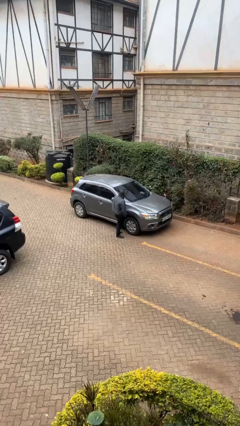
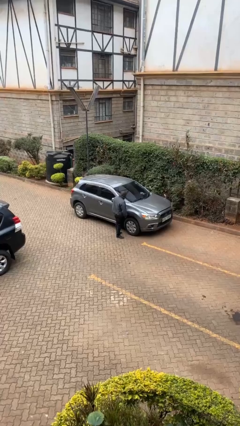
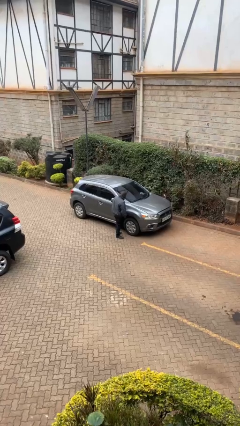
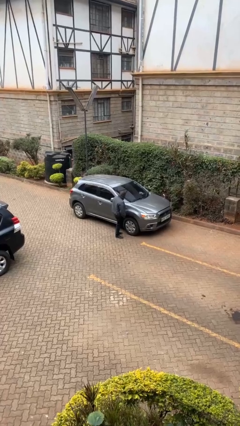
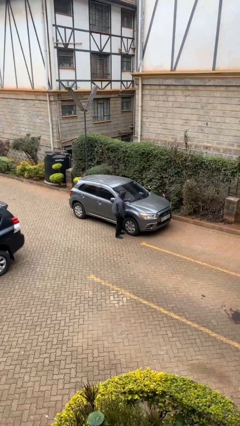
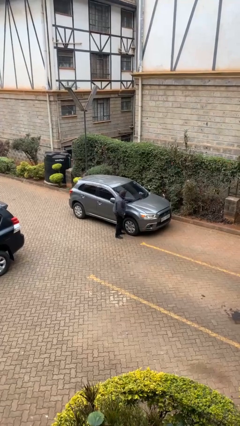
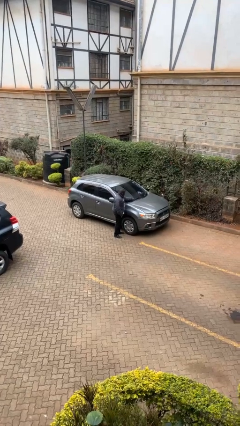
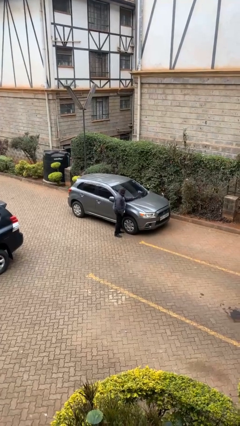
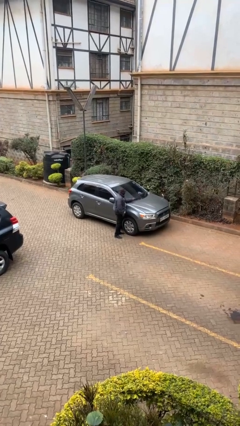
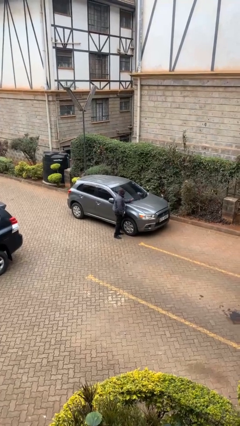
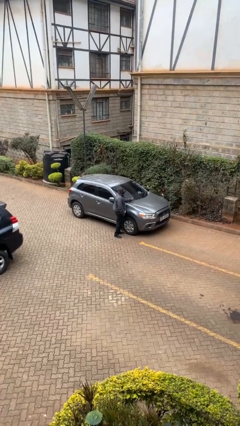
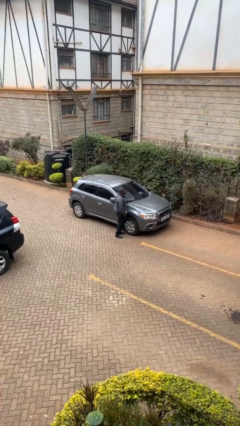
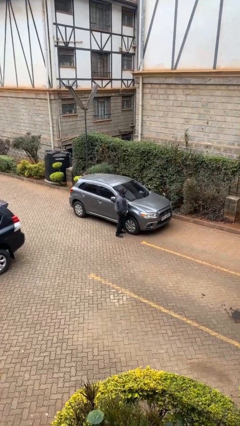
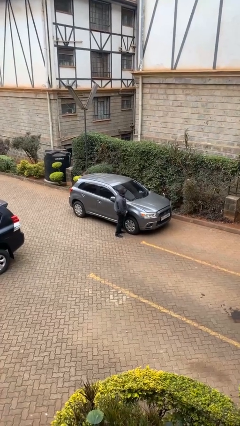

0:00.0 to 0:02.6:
person flips up car wipers

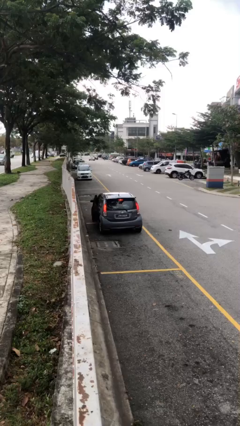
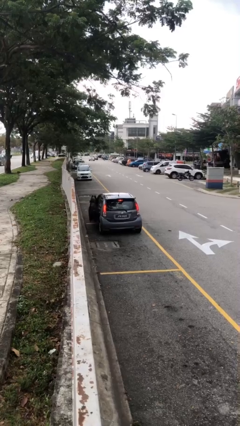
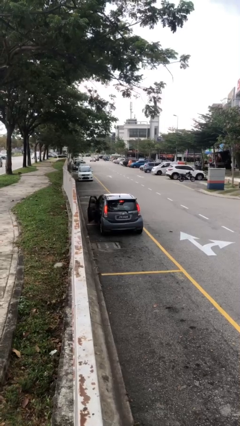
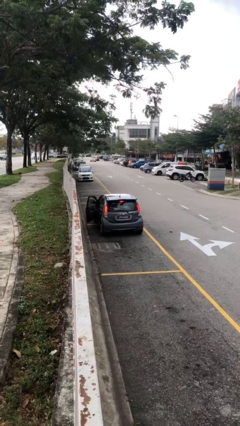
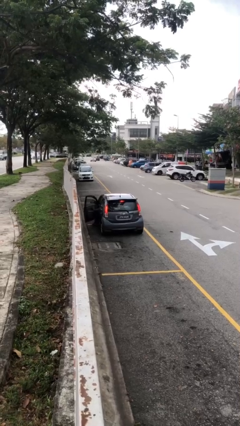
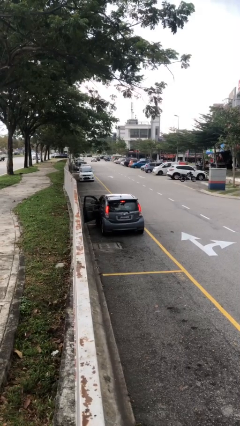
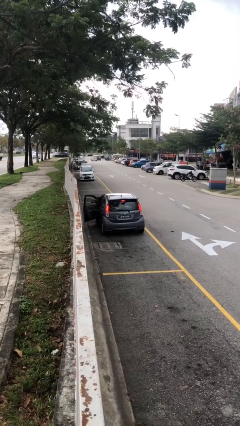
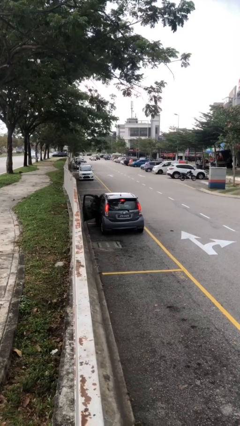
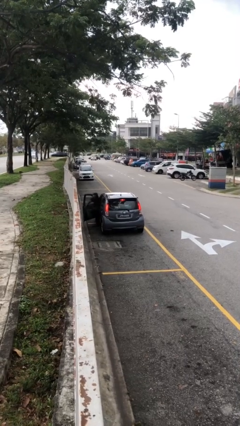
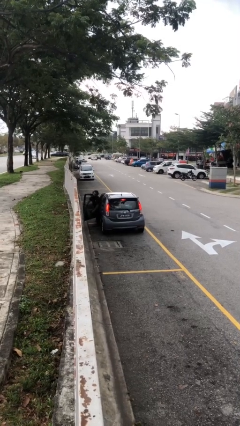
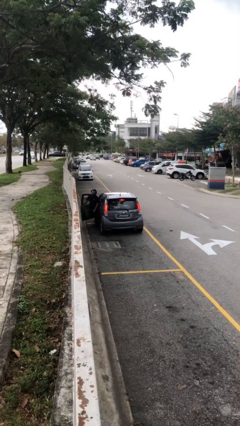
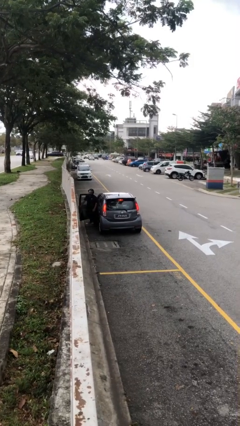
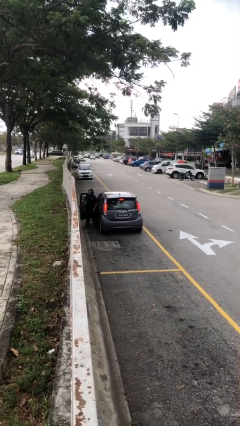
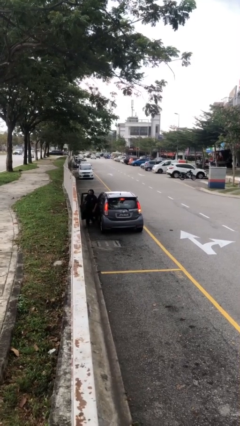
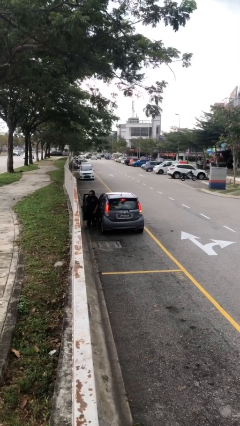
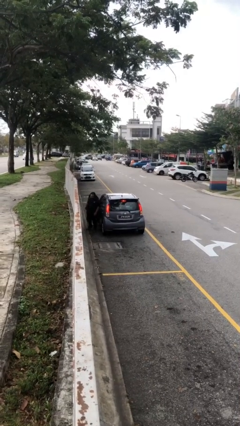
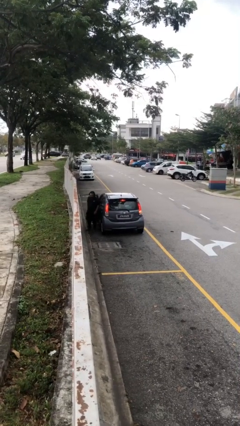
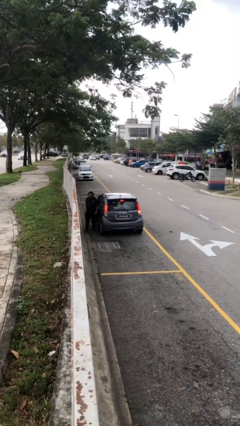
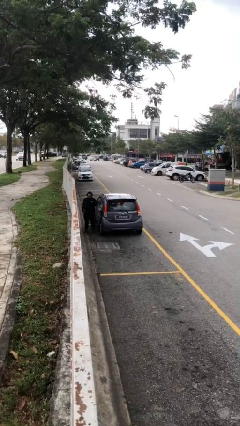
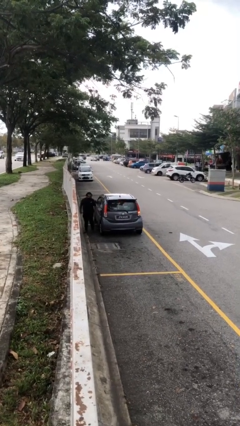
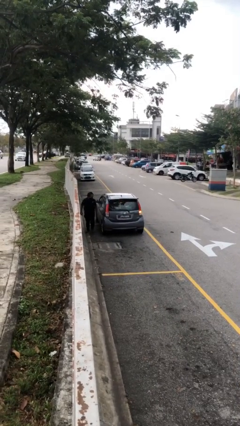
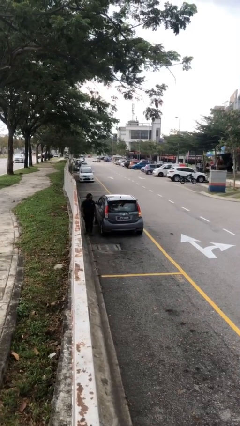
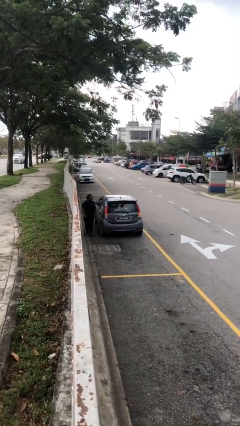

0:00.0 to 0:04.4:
car drops off person

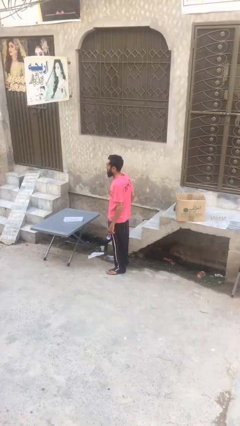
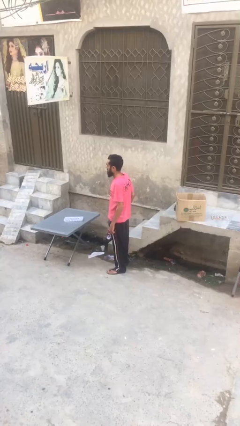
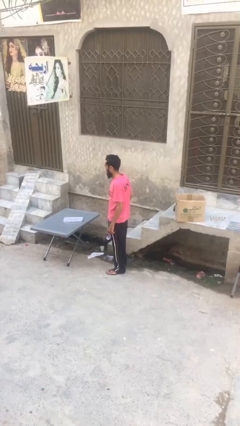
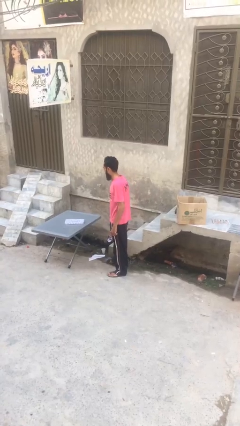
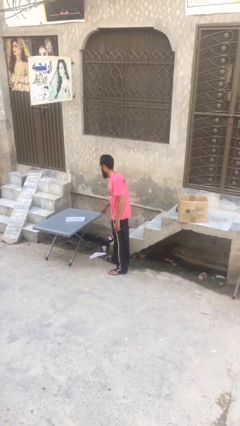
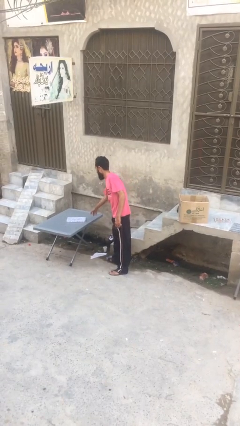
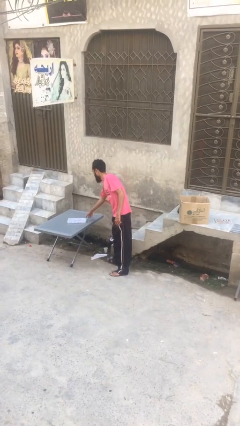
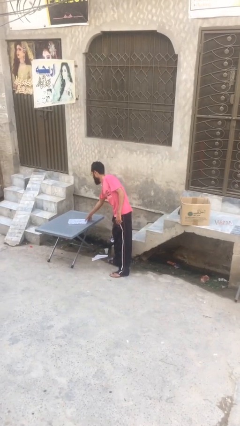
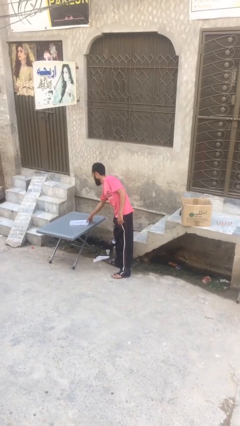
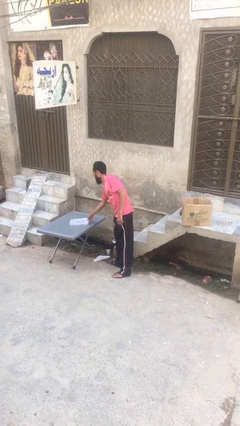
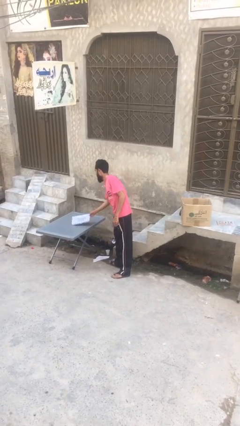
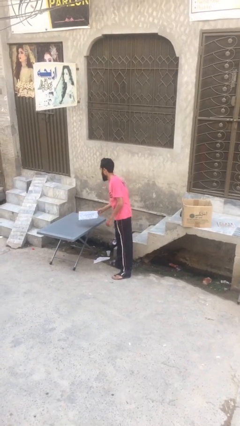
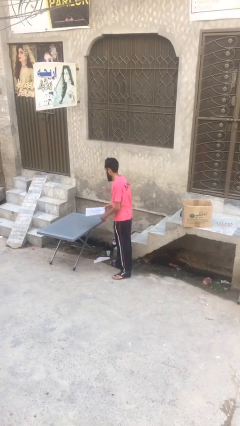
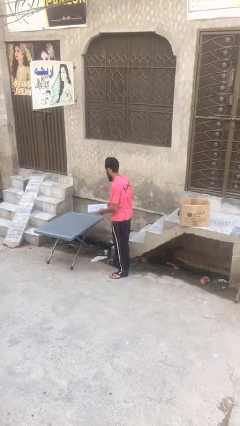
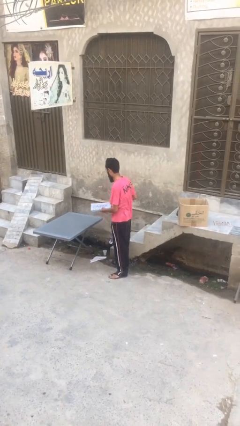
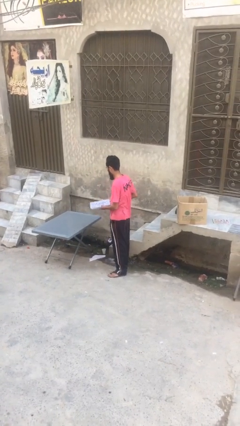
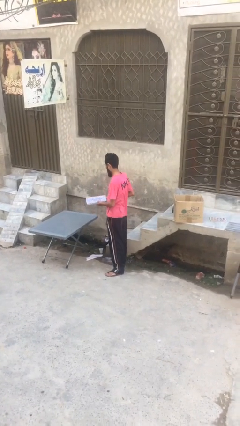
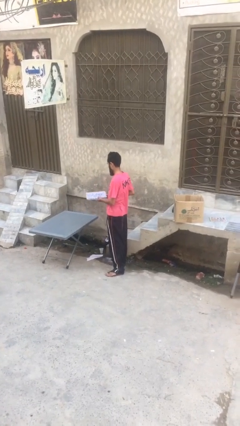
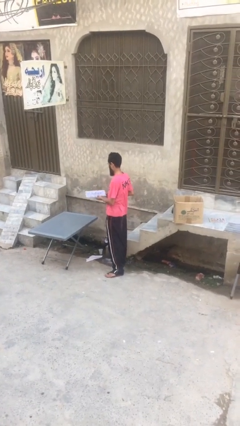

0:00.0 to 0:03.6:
person picks up object from table

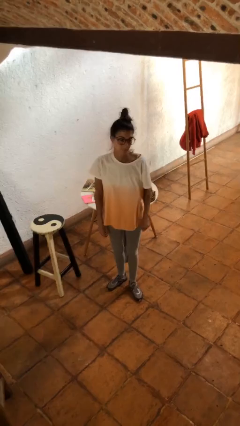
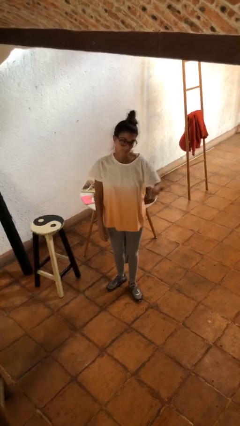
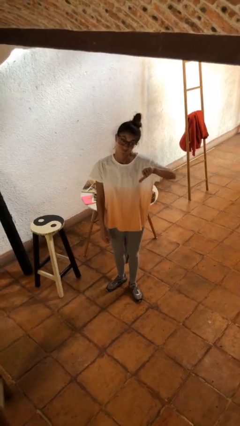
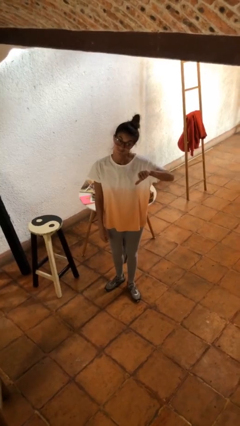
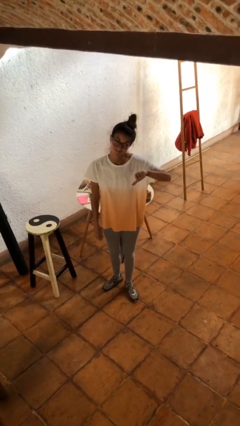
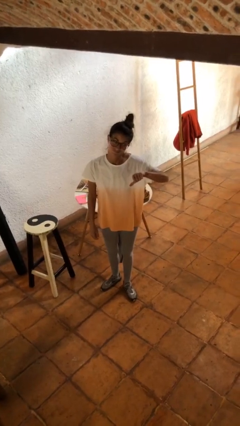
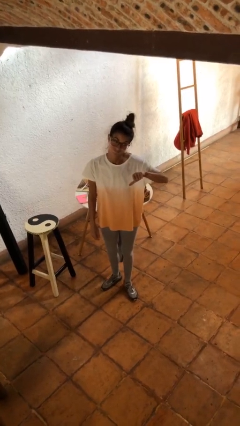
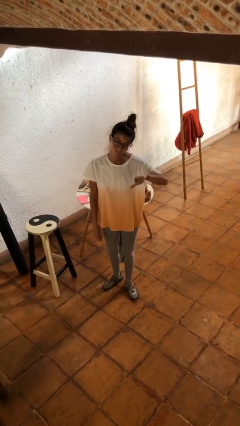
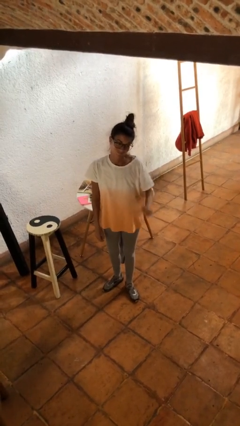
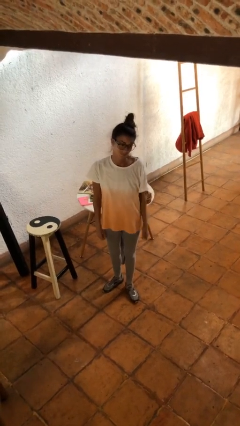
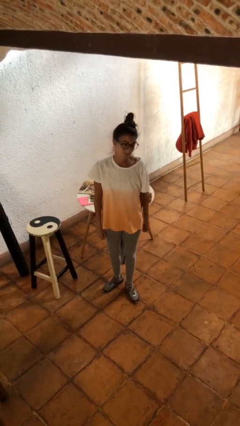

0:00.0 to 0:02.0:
person gestures thumbs down

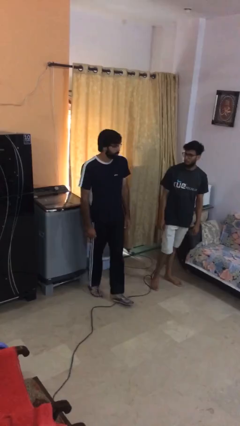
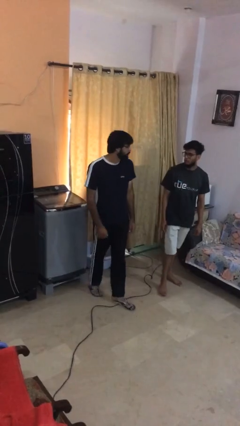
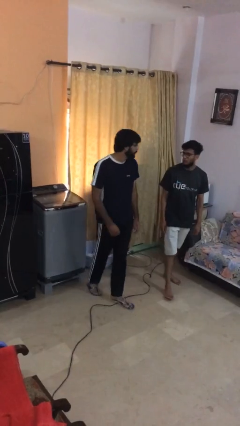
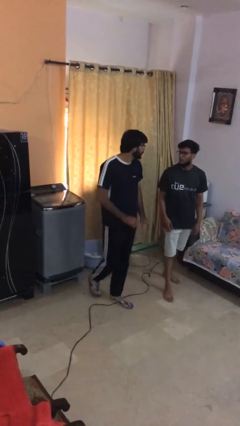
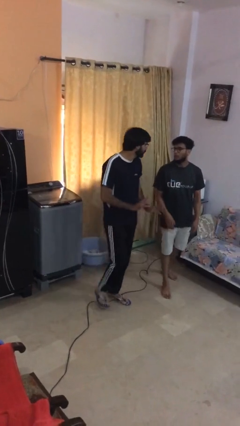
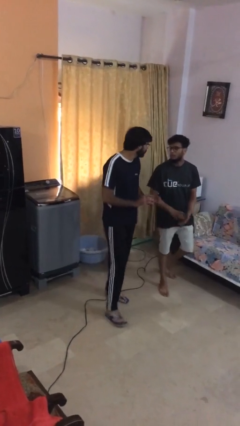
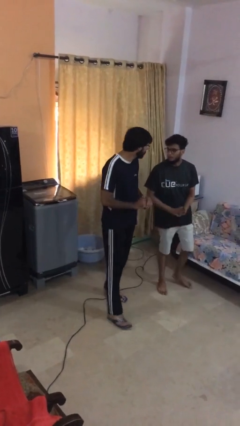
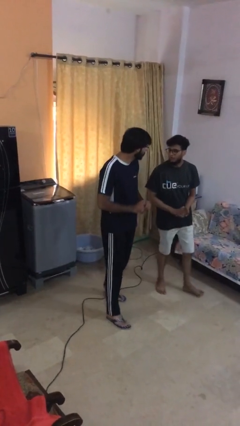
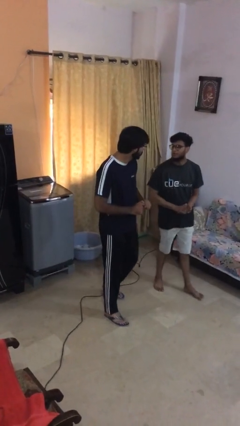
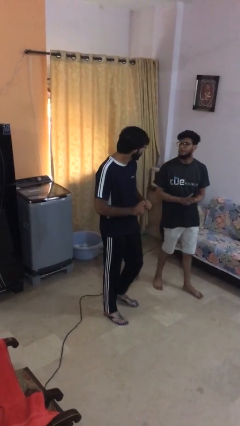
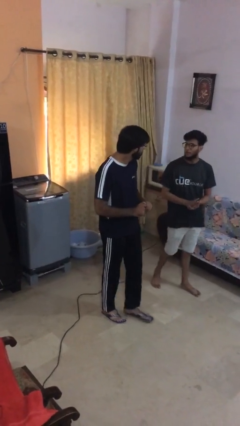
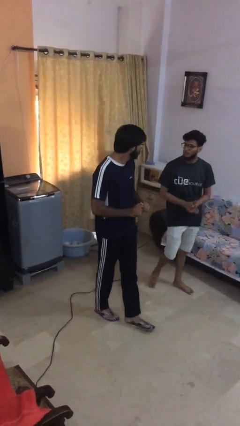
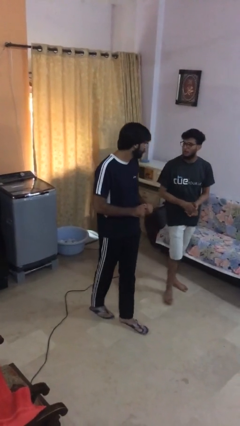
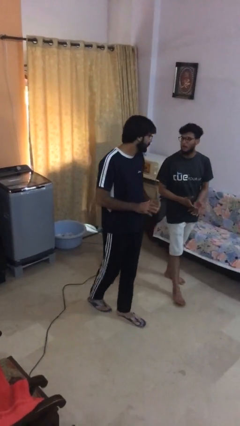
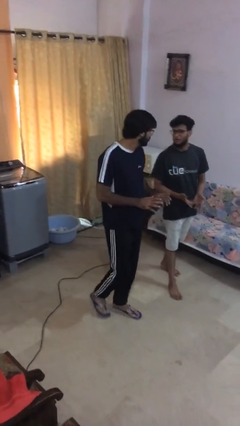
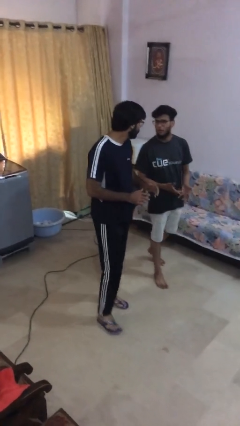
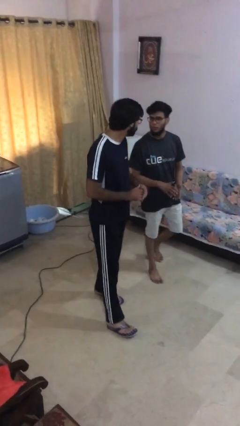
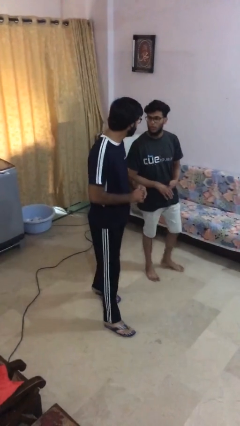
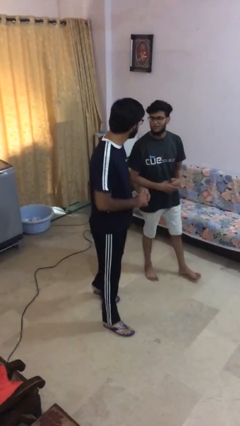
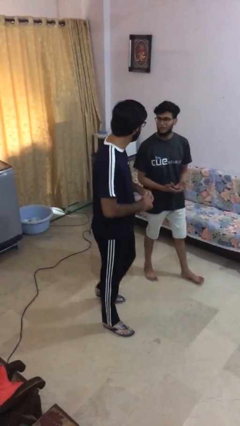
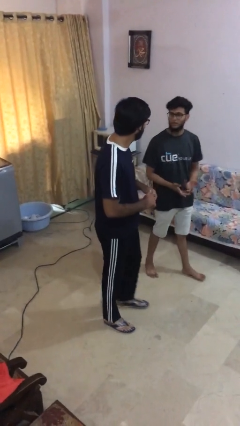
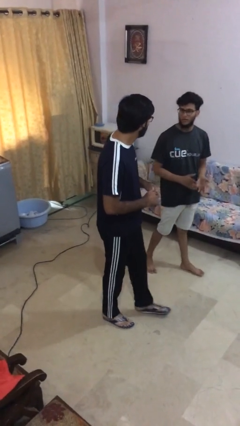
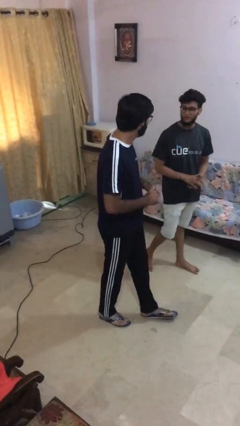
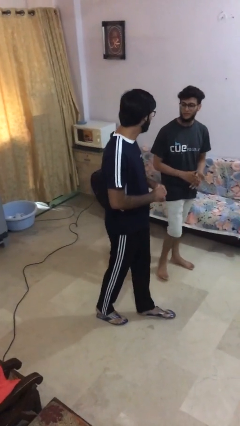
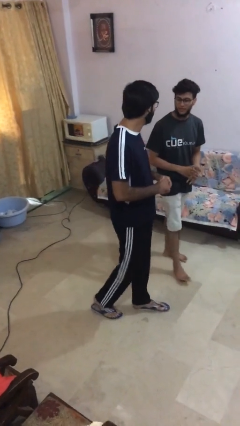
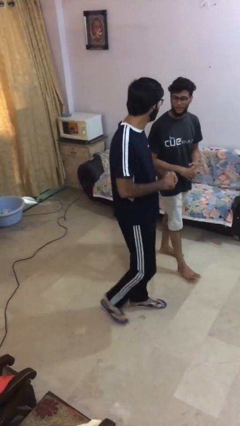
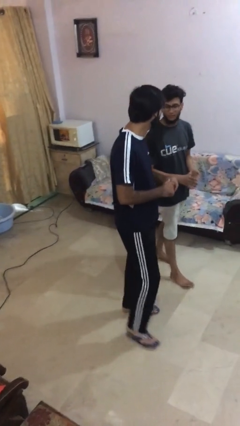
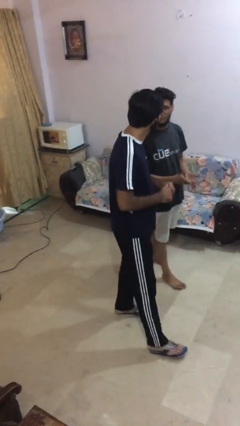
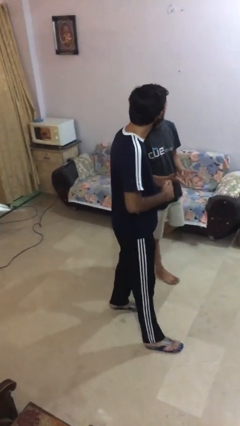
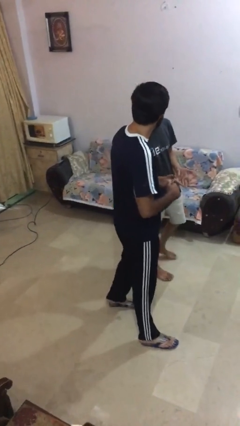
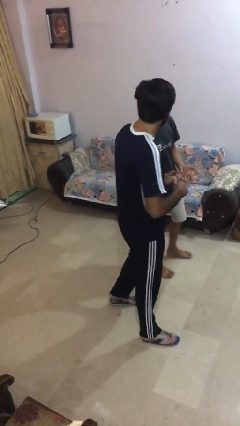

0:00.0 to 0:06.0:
person talks to person
